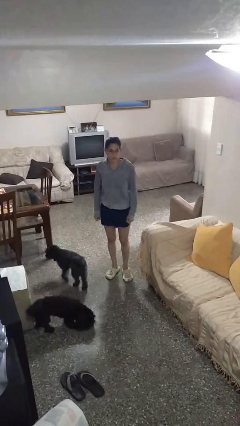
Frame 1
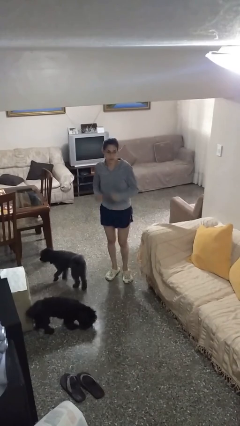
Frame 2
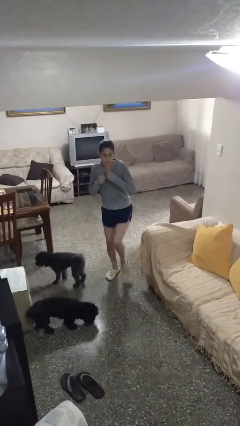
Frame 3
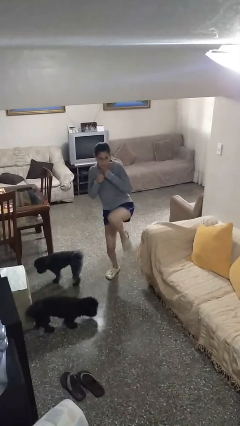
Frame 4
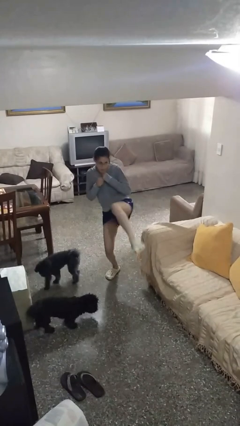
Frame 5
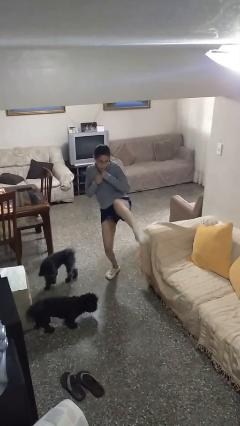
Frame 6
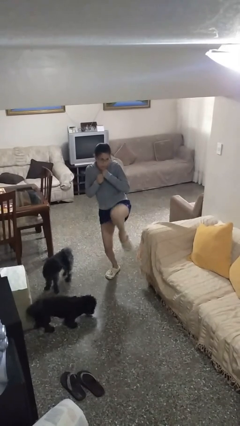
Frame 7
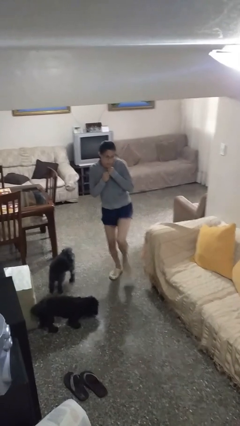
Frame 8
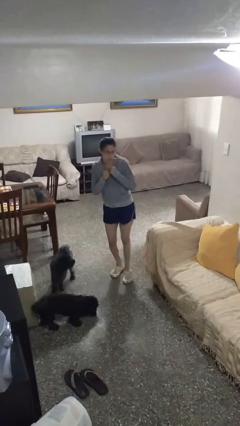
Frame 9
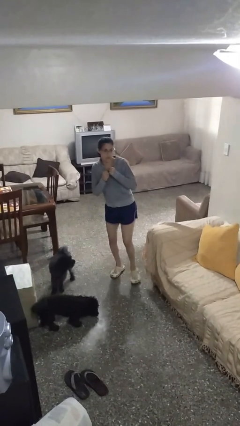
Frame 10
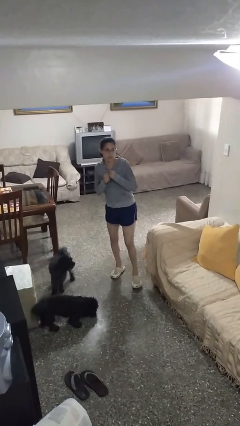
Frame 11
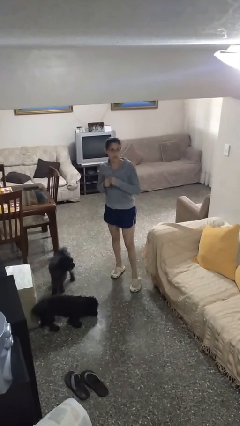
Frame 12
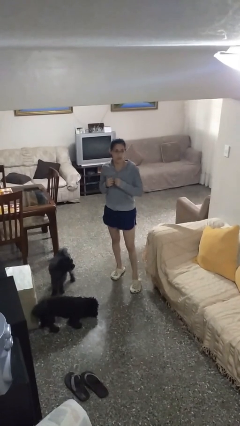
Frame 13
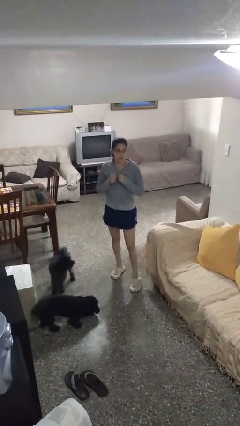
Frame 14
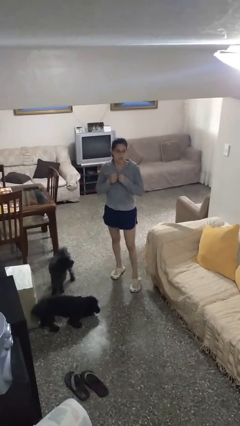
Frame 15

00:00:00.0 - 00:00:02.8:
person karate kicks

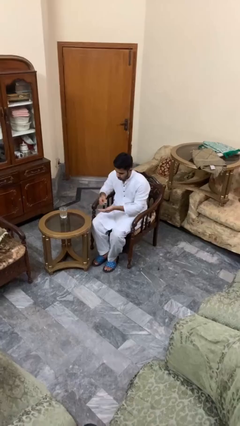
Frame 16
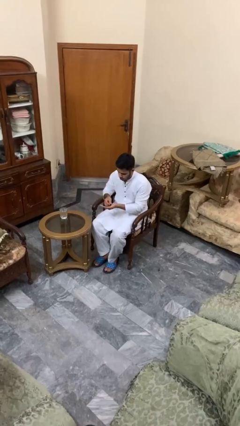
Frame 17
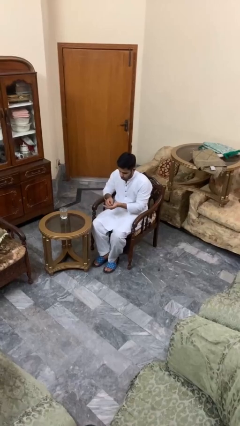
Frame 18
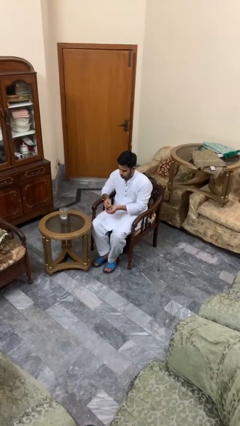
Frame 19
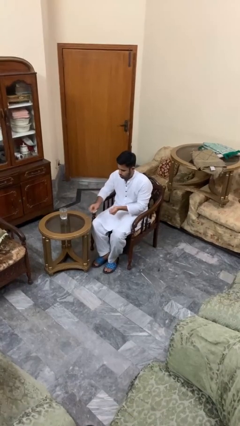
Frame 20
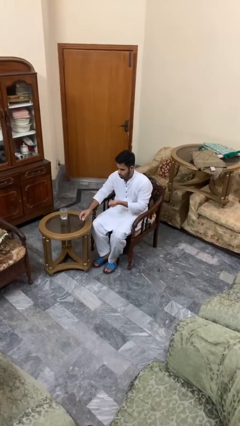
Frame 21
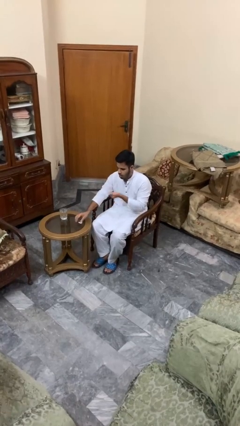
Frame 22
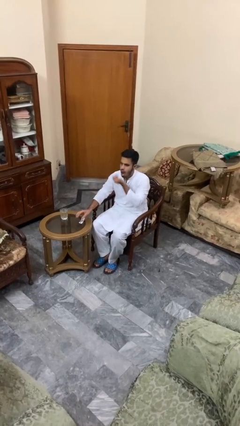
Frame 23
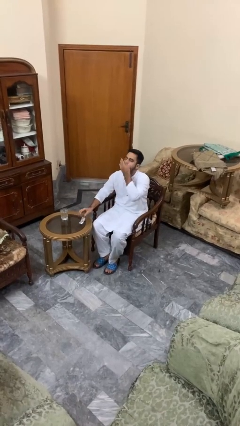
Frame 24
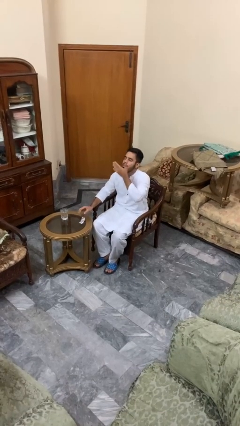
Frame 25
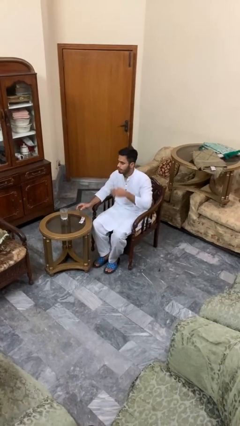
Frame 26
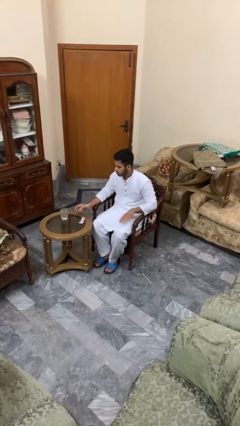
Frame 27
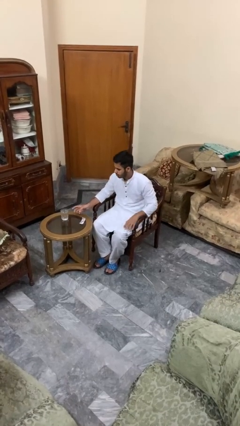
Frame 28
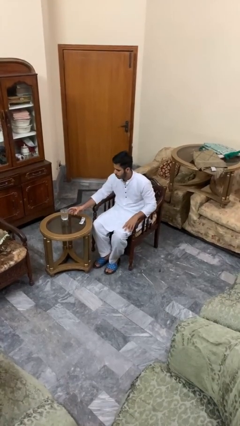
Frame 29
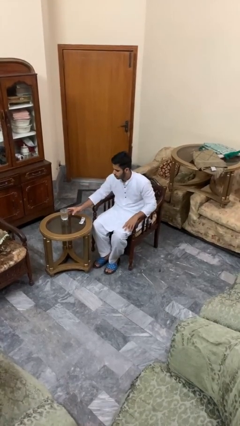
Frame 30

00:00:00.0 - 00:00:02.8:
person takes medicine pills

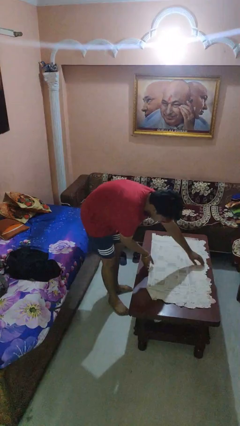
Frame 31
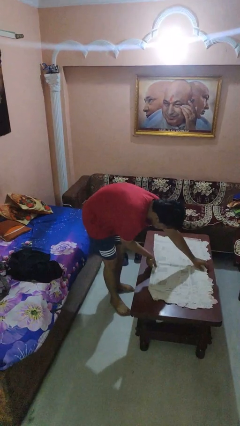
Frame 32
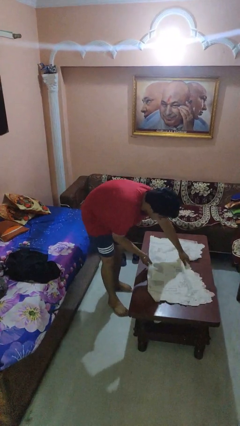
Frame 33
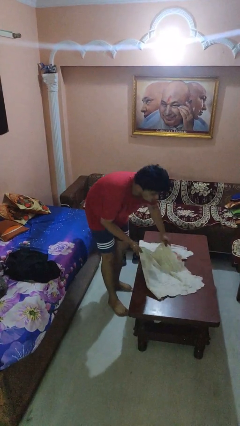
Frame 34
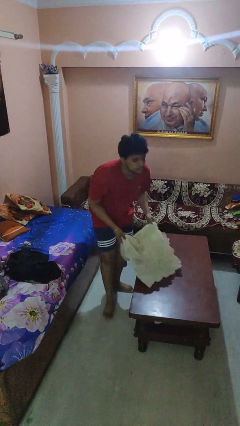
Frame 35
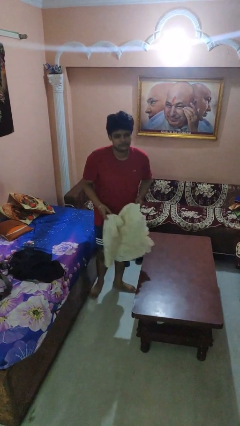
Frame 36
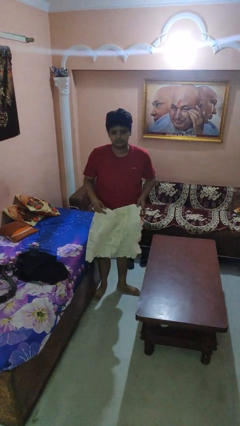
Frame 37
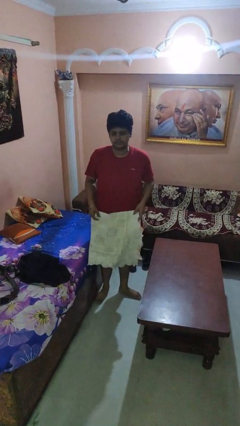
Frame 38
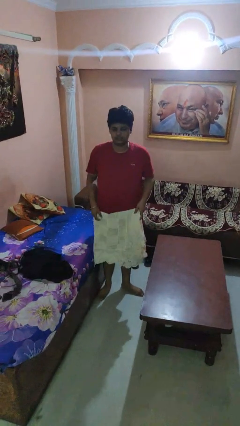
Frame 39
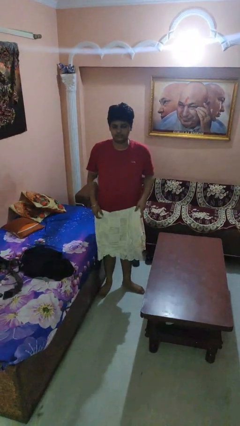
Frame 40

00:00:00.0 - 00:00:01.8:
person folds tablecloth

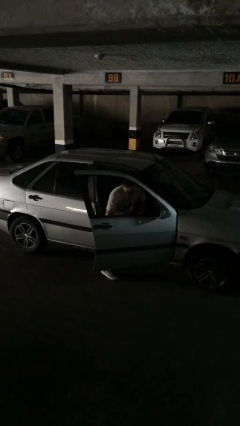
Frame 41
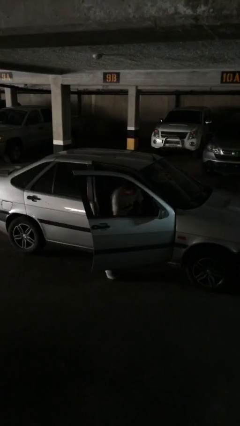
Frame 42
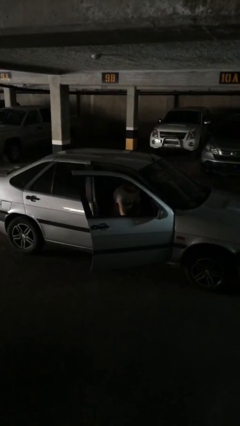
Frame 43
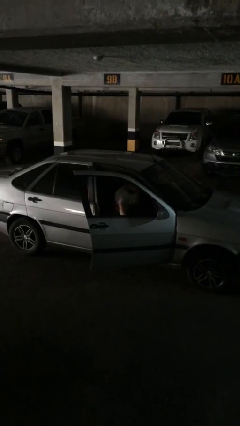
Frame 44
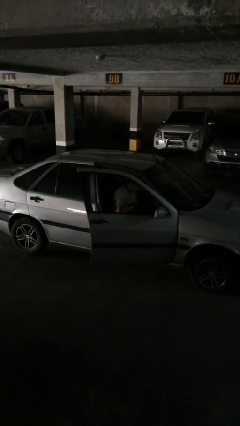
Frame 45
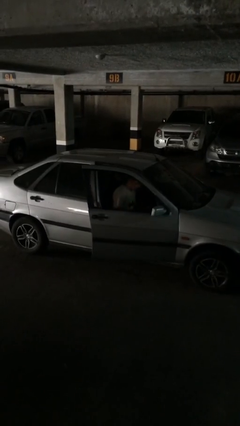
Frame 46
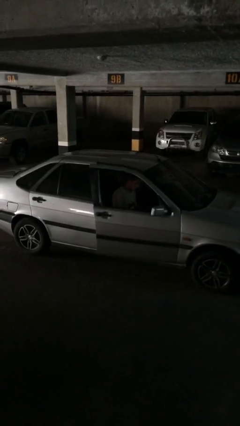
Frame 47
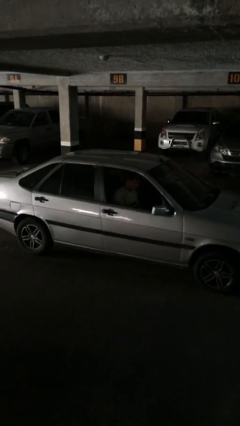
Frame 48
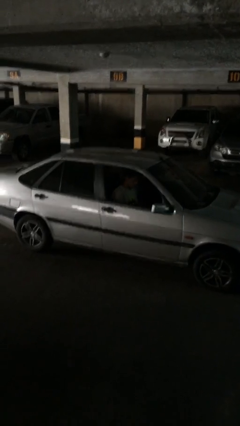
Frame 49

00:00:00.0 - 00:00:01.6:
person closes car door

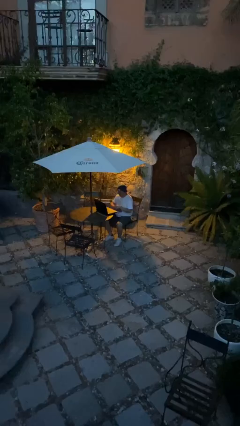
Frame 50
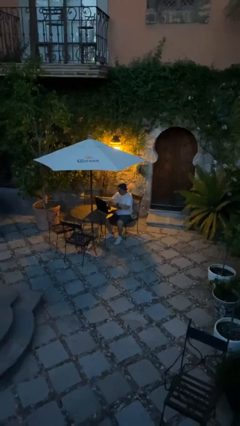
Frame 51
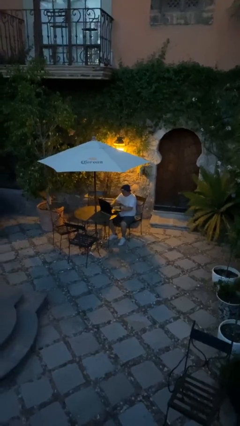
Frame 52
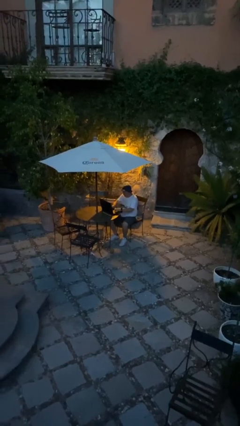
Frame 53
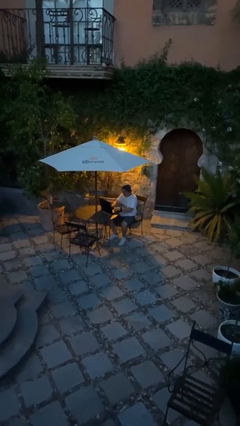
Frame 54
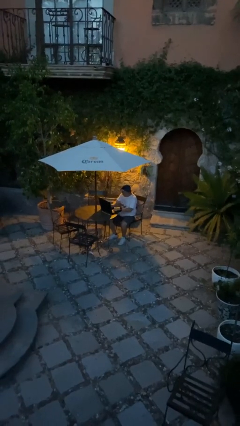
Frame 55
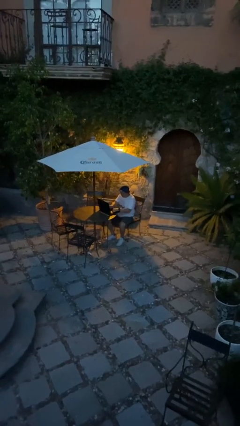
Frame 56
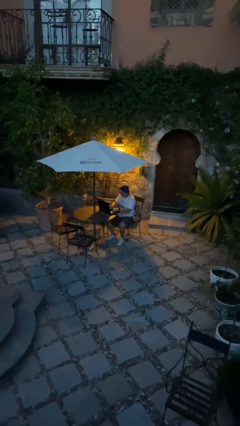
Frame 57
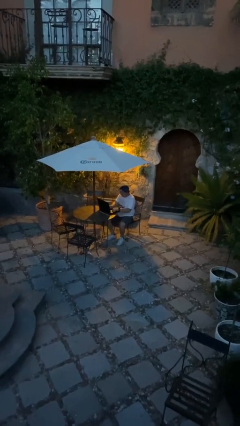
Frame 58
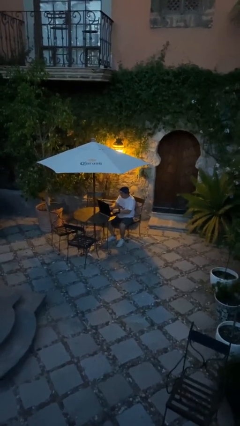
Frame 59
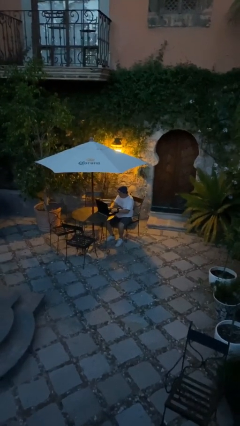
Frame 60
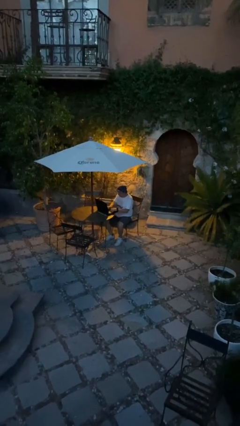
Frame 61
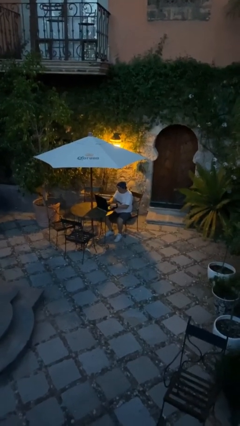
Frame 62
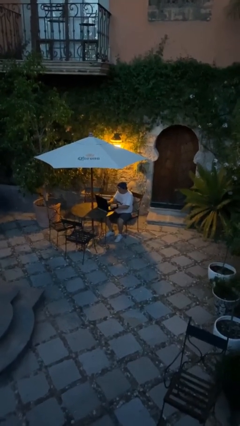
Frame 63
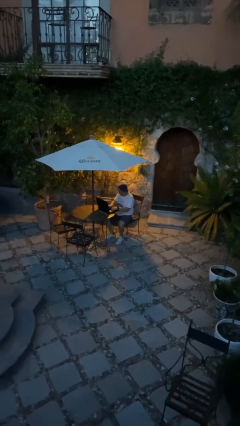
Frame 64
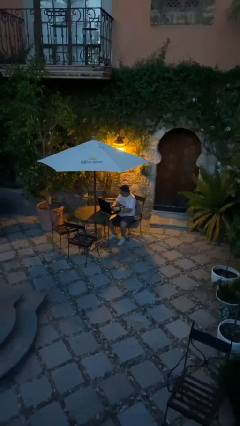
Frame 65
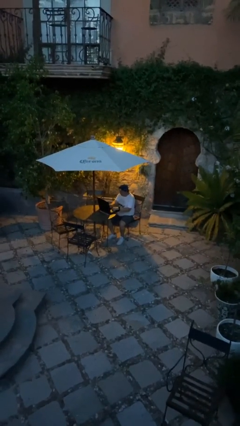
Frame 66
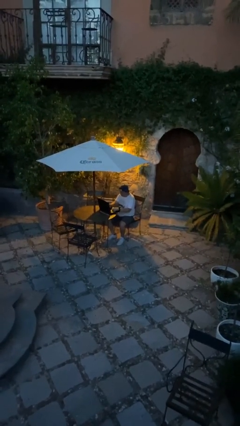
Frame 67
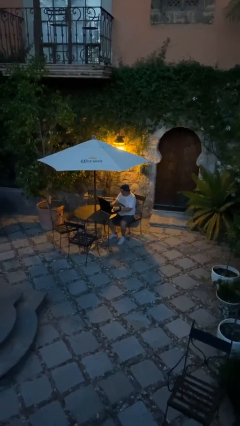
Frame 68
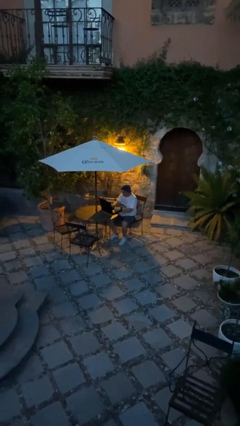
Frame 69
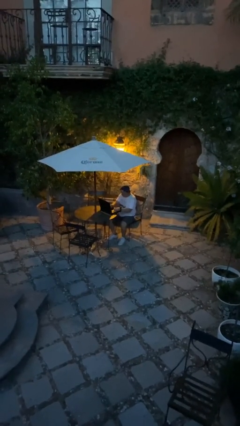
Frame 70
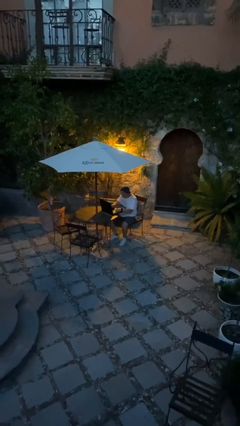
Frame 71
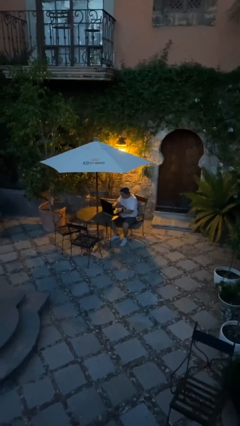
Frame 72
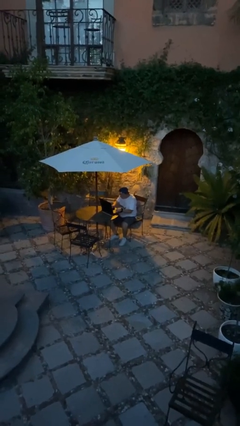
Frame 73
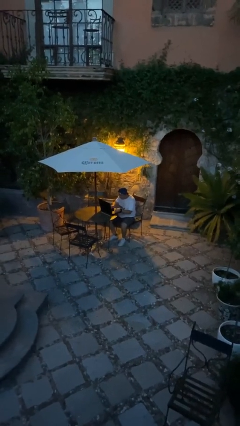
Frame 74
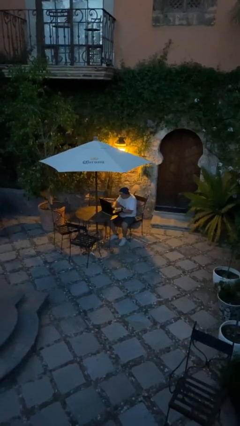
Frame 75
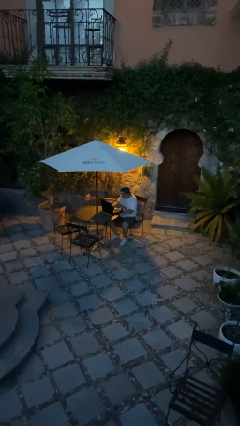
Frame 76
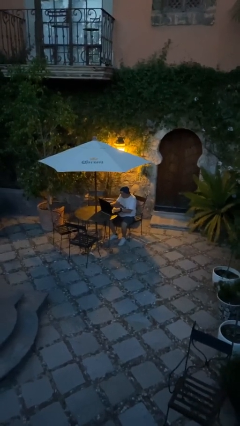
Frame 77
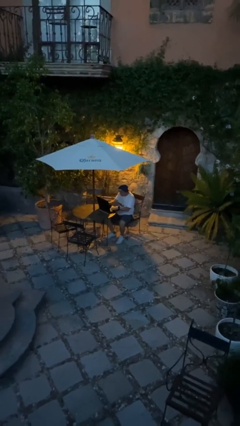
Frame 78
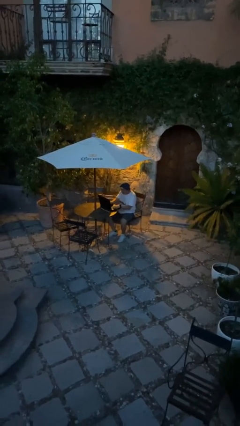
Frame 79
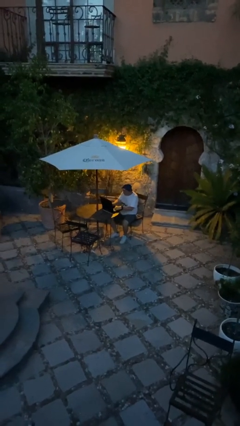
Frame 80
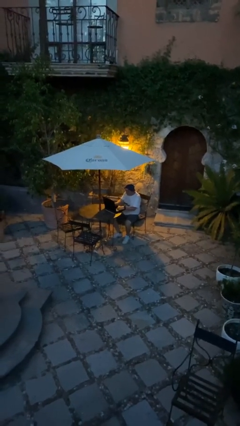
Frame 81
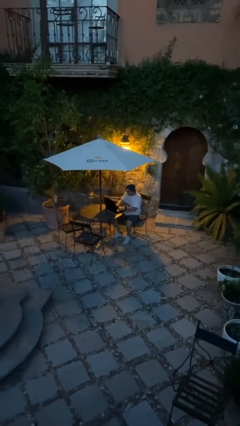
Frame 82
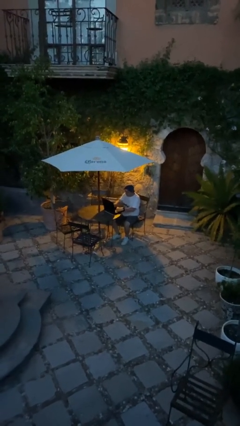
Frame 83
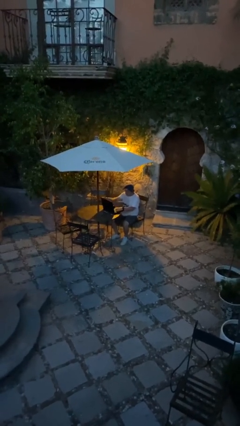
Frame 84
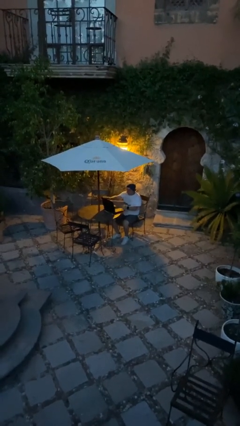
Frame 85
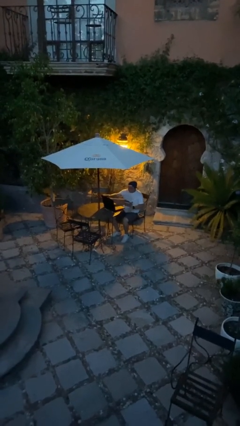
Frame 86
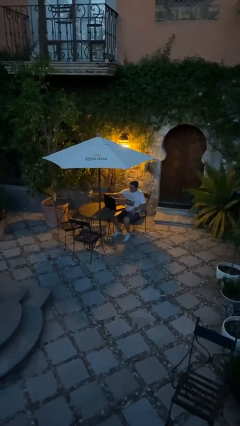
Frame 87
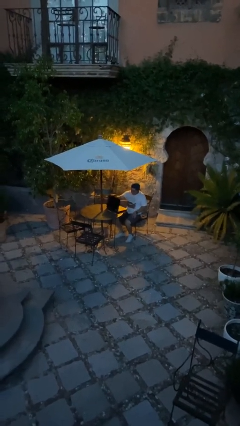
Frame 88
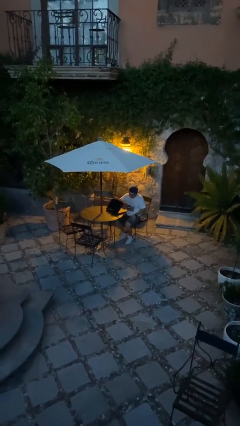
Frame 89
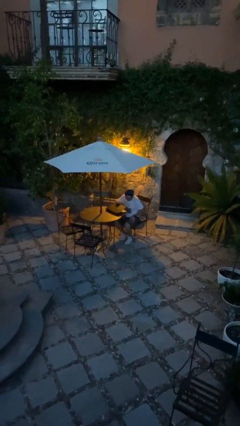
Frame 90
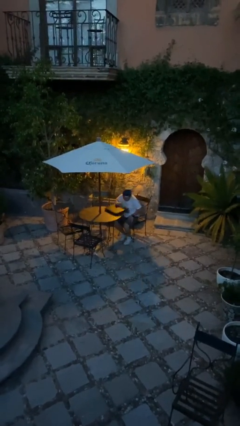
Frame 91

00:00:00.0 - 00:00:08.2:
person interacts with laptop

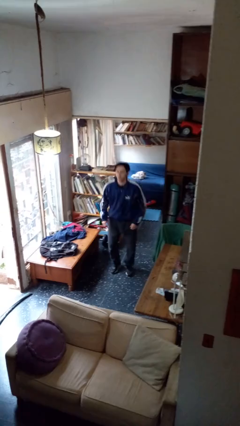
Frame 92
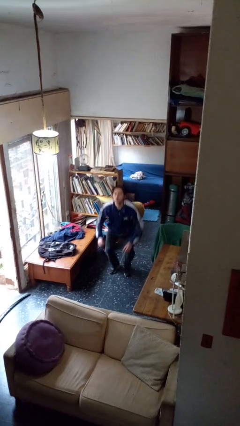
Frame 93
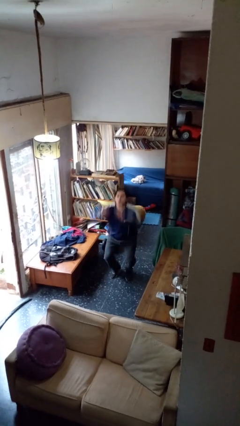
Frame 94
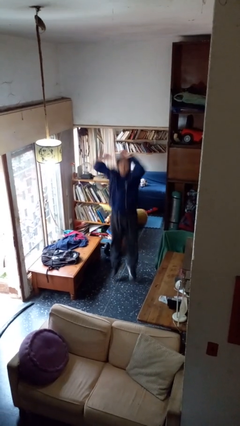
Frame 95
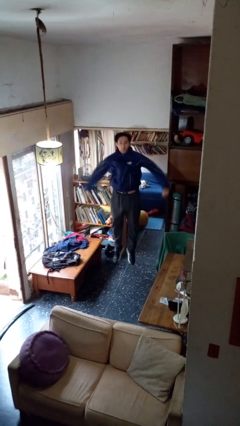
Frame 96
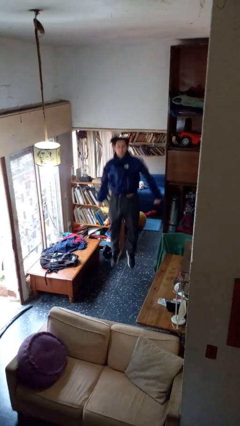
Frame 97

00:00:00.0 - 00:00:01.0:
person jumps
